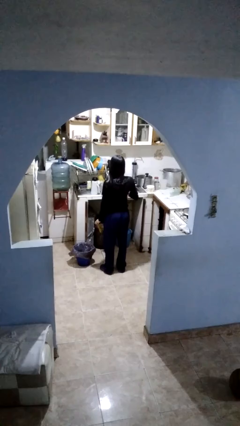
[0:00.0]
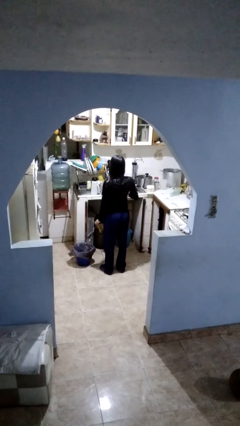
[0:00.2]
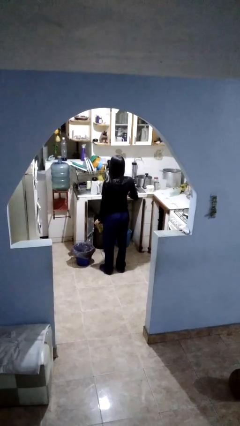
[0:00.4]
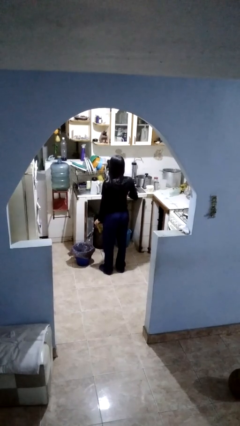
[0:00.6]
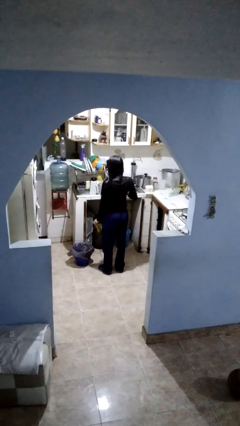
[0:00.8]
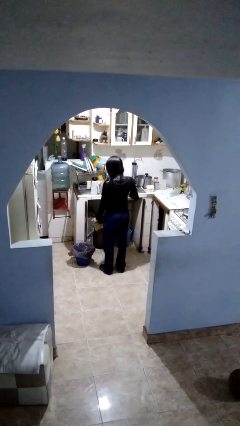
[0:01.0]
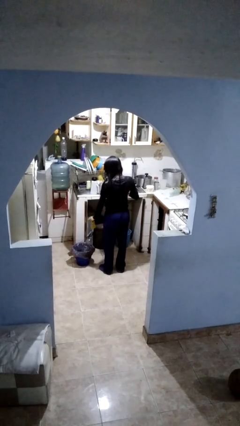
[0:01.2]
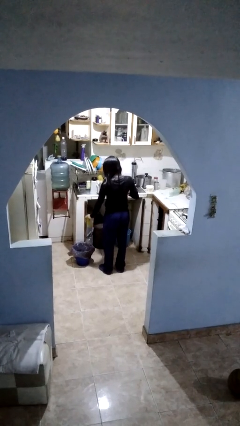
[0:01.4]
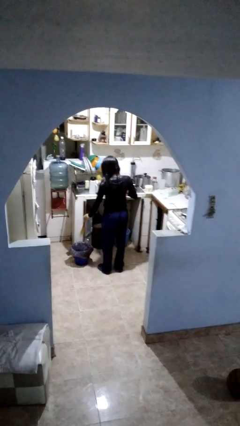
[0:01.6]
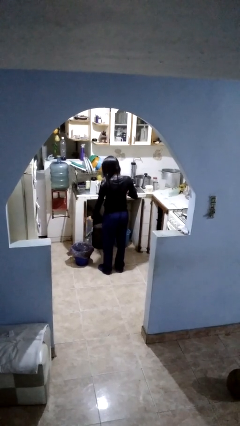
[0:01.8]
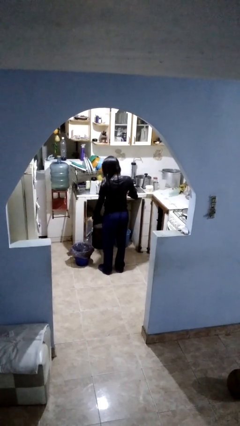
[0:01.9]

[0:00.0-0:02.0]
person discards trash

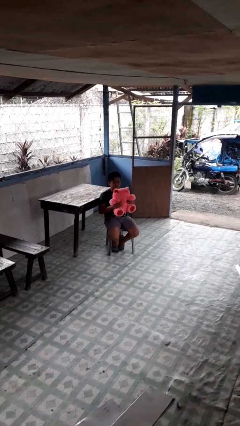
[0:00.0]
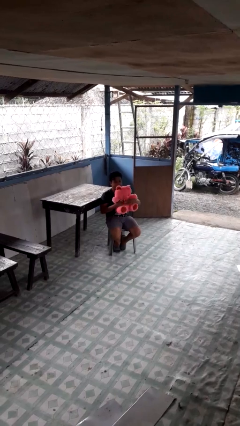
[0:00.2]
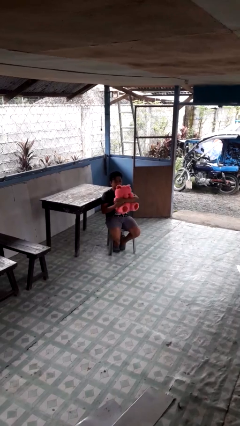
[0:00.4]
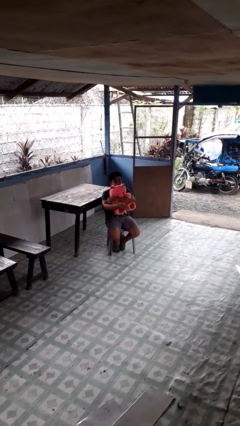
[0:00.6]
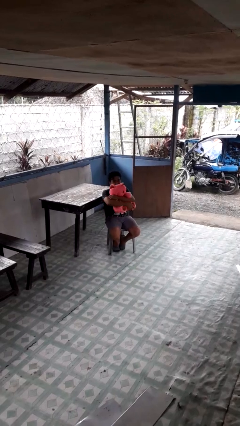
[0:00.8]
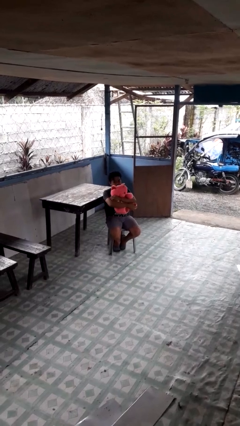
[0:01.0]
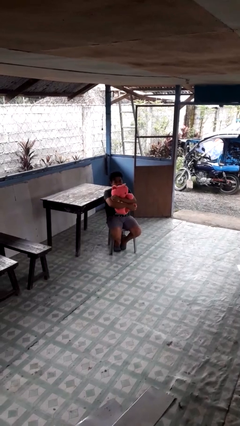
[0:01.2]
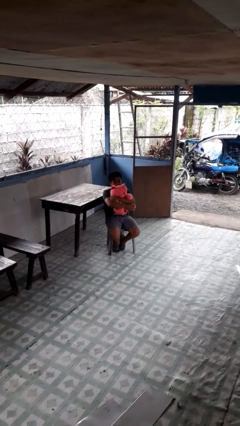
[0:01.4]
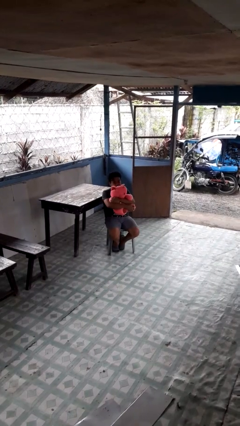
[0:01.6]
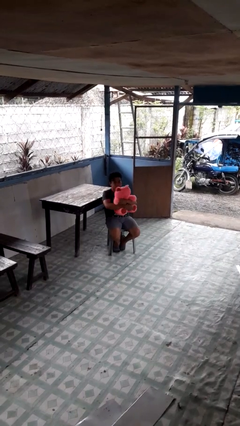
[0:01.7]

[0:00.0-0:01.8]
person hugs stuffed animal

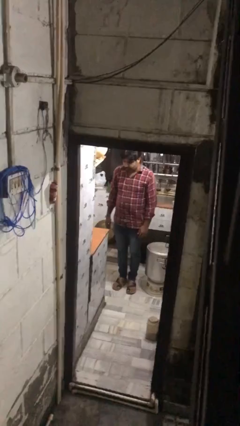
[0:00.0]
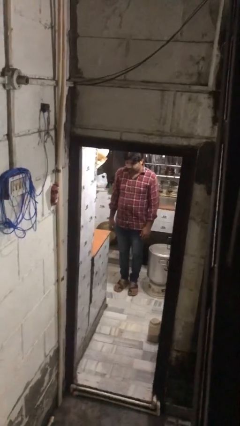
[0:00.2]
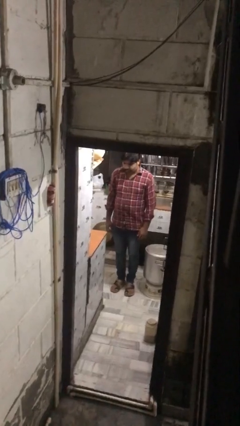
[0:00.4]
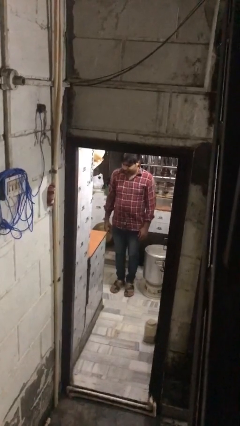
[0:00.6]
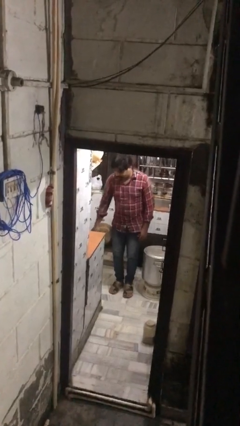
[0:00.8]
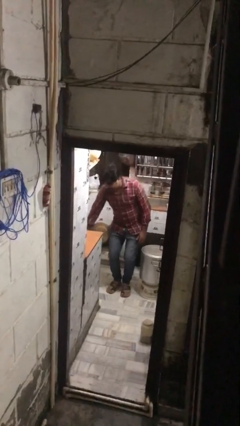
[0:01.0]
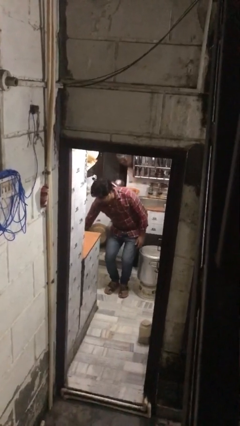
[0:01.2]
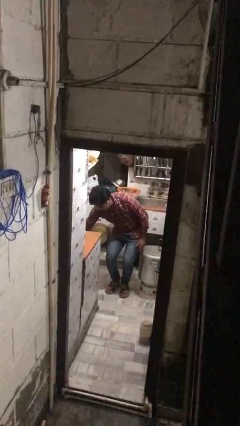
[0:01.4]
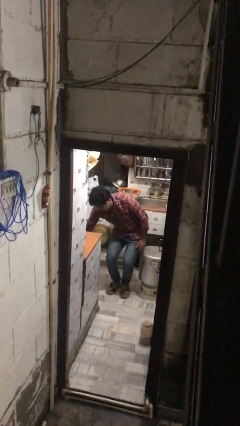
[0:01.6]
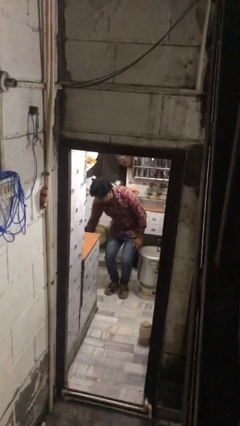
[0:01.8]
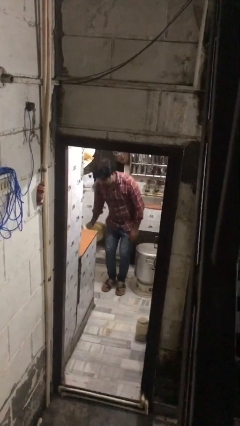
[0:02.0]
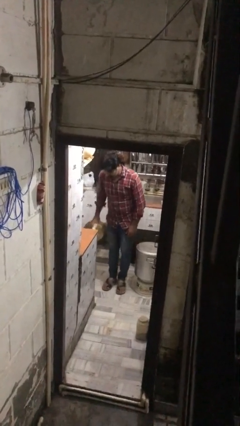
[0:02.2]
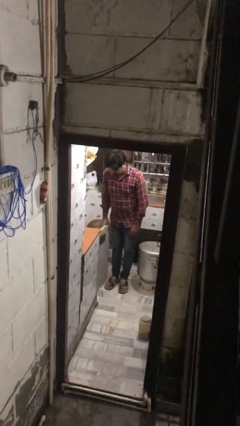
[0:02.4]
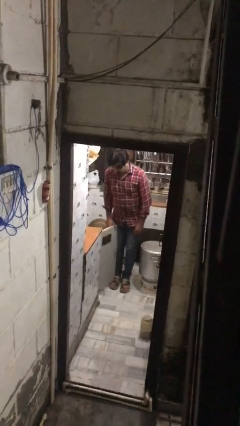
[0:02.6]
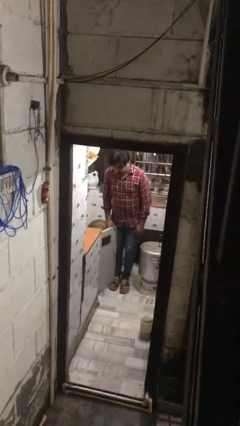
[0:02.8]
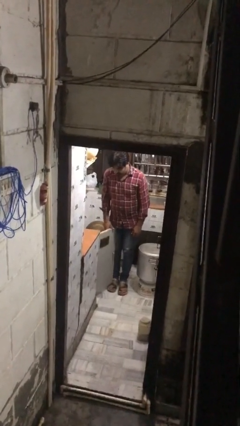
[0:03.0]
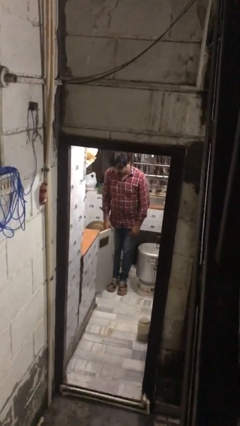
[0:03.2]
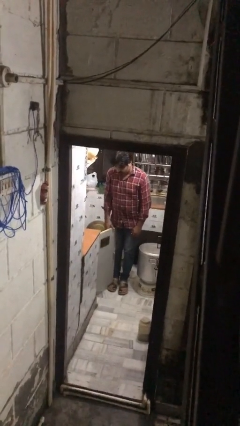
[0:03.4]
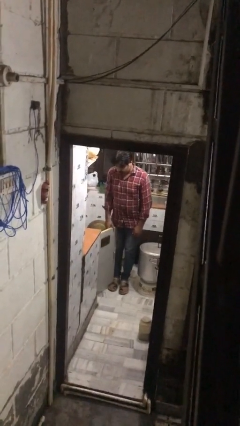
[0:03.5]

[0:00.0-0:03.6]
person opens kitchen drawer

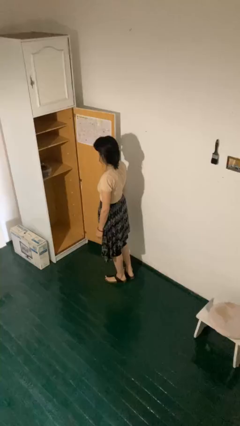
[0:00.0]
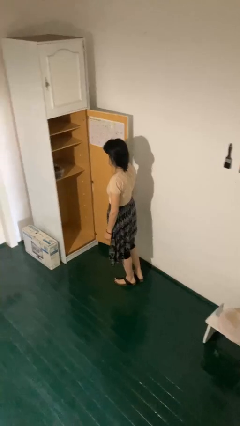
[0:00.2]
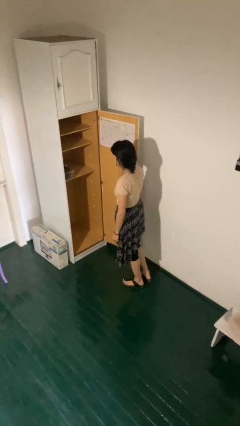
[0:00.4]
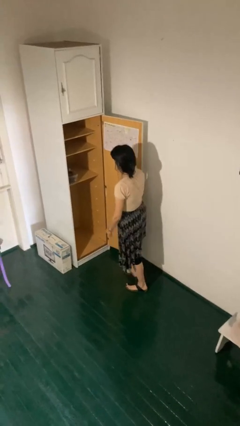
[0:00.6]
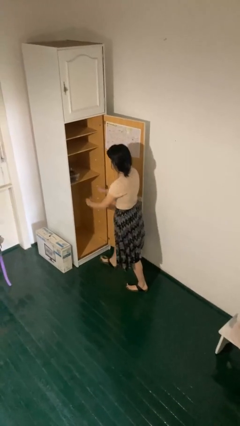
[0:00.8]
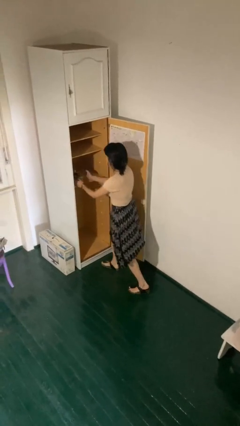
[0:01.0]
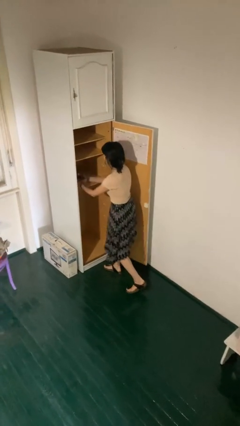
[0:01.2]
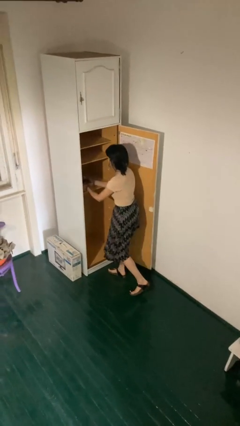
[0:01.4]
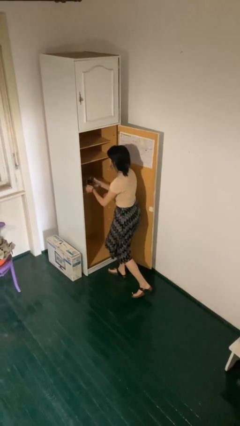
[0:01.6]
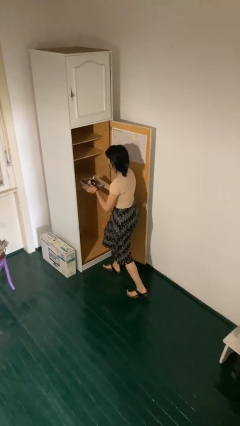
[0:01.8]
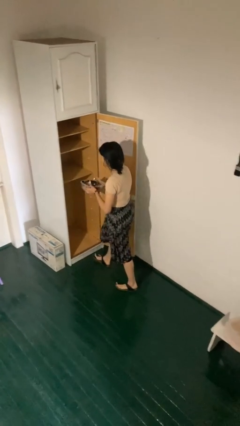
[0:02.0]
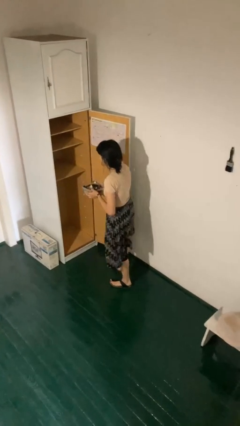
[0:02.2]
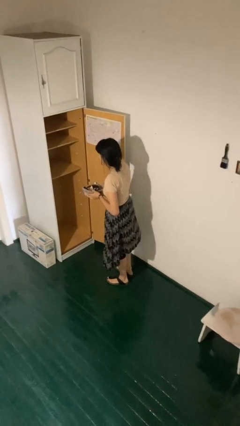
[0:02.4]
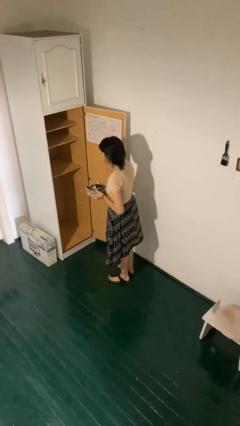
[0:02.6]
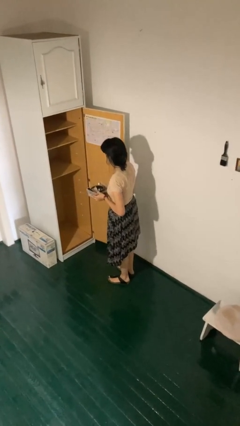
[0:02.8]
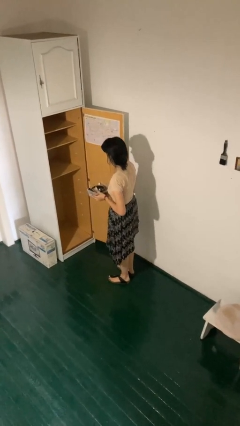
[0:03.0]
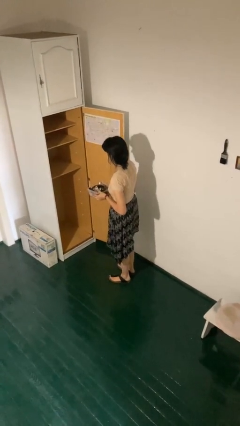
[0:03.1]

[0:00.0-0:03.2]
person picks up object from cabinet

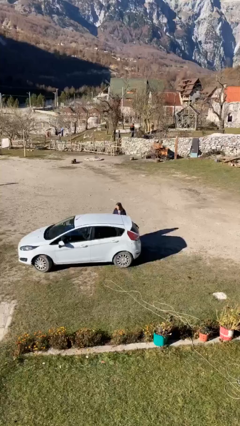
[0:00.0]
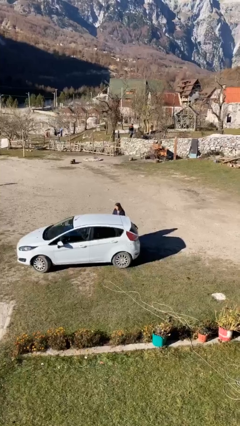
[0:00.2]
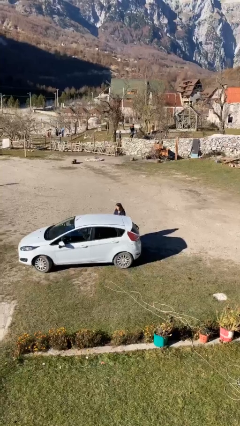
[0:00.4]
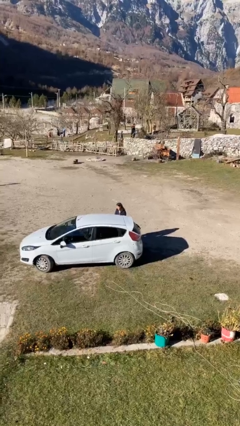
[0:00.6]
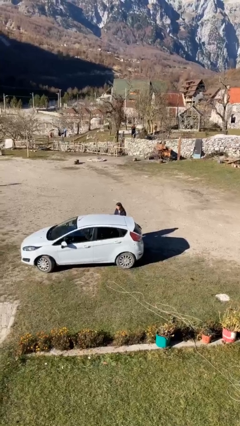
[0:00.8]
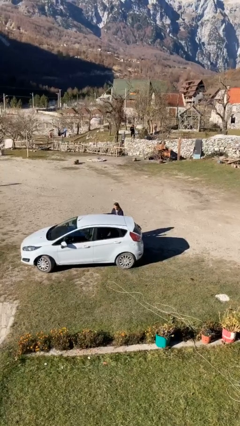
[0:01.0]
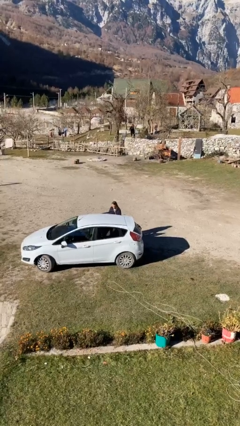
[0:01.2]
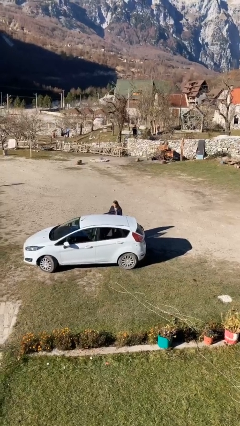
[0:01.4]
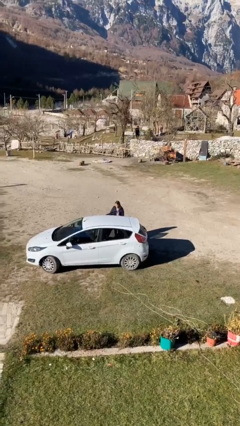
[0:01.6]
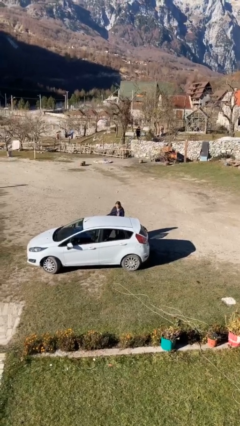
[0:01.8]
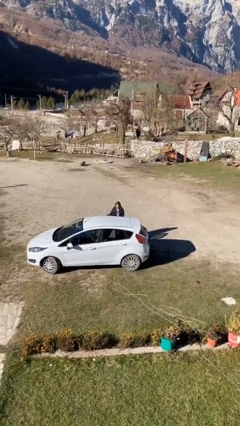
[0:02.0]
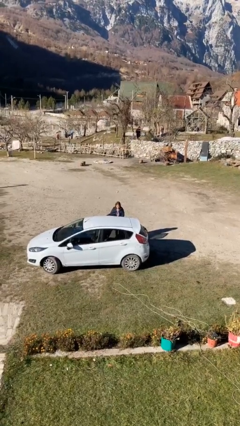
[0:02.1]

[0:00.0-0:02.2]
person opens car door

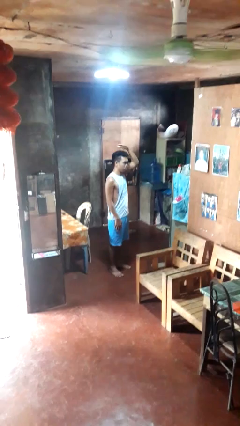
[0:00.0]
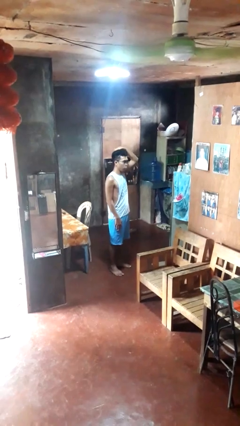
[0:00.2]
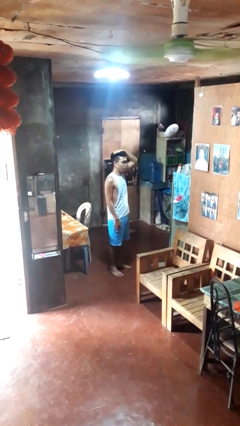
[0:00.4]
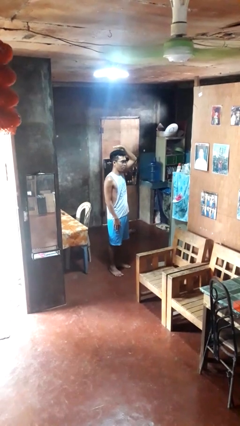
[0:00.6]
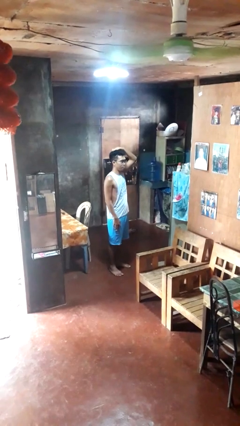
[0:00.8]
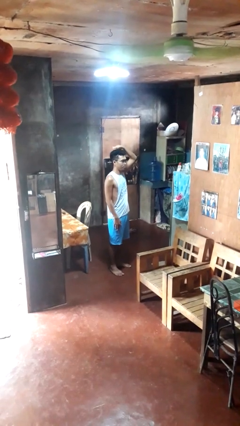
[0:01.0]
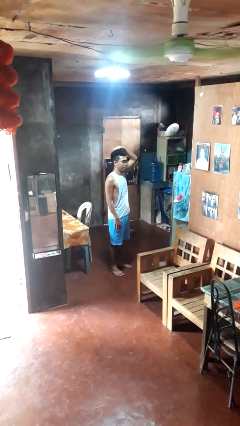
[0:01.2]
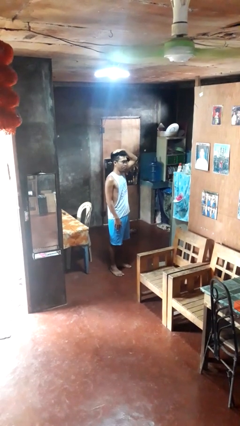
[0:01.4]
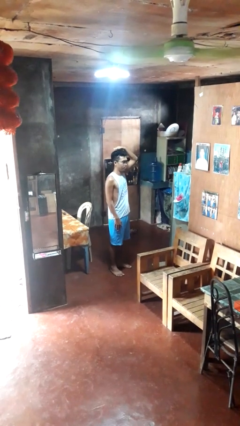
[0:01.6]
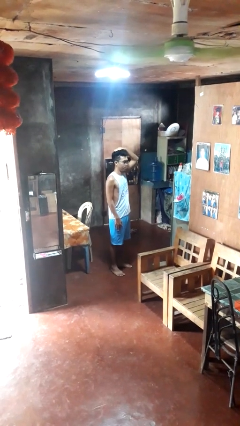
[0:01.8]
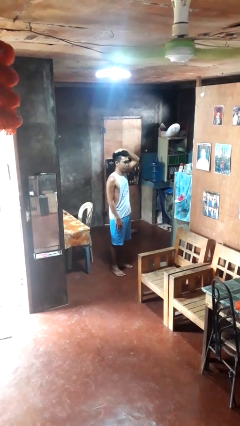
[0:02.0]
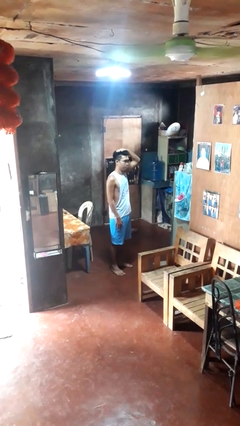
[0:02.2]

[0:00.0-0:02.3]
person pats head

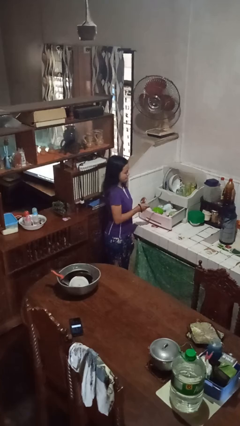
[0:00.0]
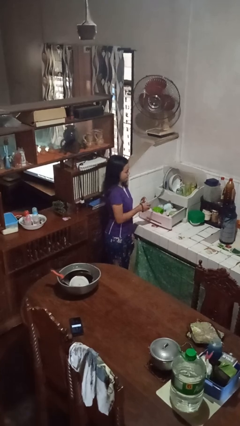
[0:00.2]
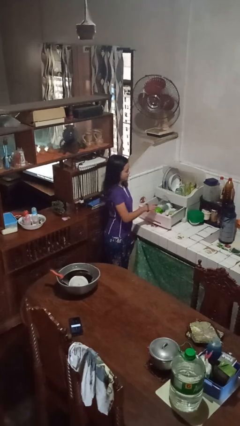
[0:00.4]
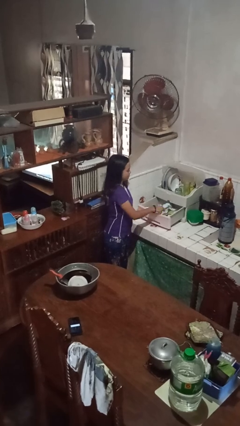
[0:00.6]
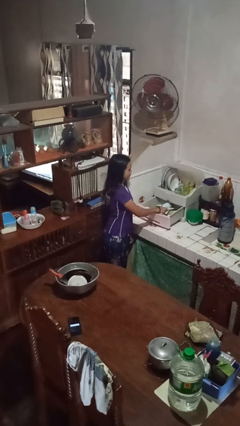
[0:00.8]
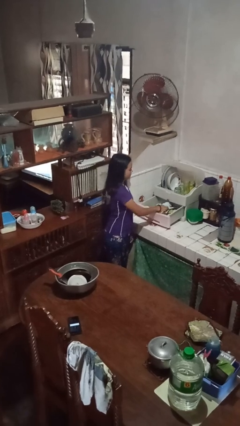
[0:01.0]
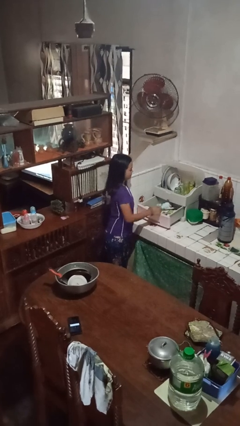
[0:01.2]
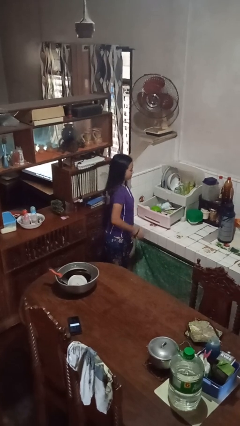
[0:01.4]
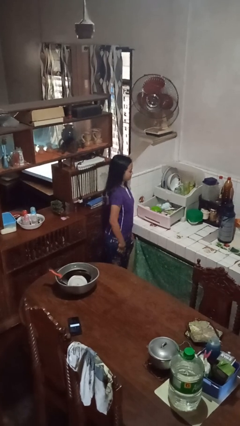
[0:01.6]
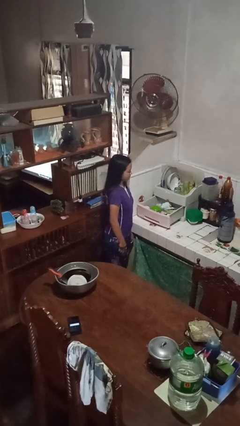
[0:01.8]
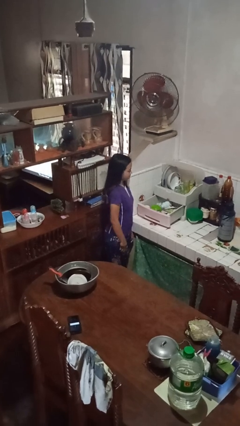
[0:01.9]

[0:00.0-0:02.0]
person puts object into kitchen drawer

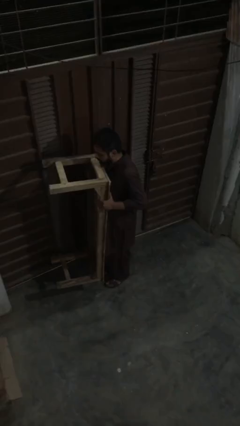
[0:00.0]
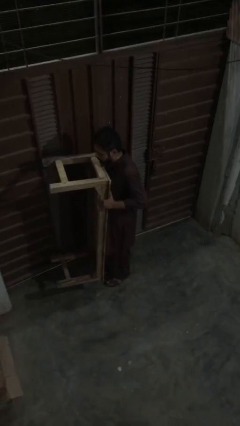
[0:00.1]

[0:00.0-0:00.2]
person puts down object on floor
